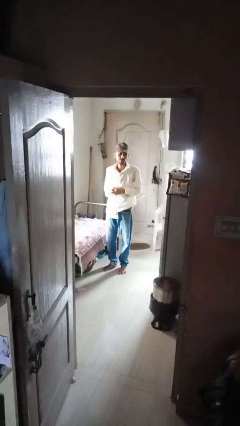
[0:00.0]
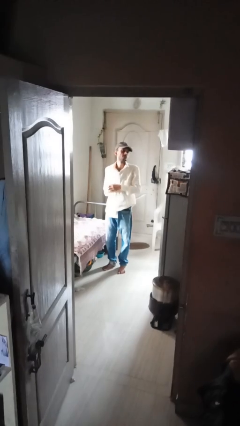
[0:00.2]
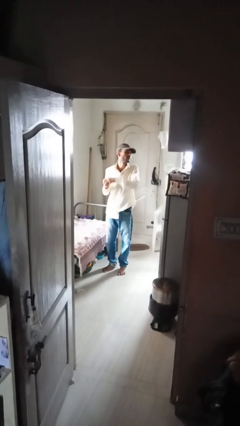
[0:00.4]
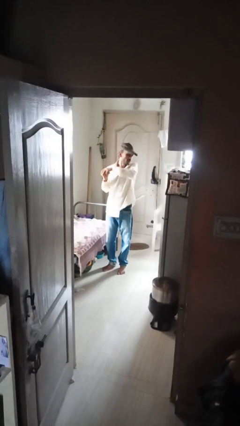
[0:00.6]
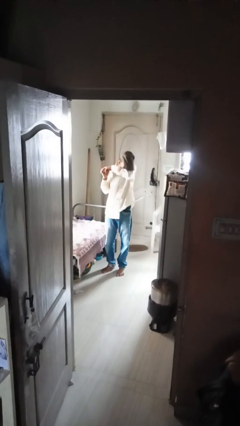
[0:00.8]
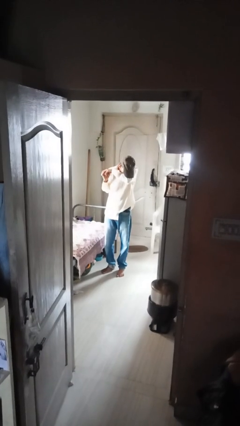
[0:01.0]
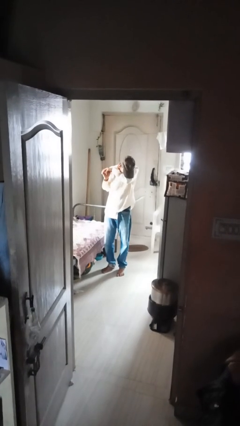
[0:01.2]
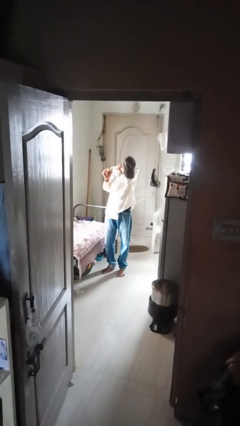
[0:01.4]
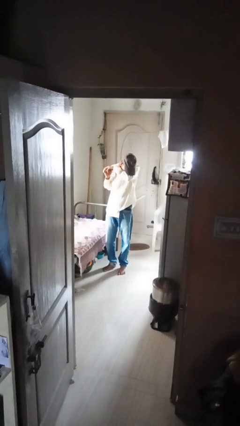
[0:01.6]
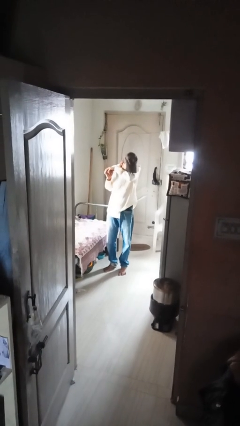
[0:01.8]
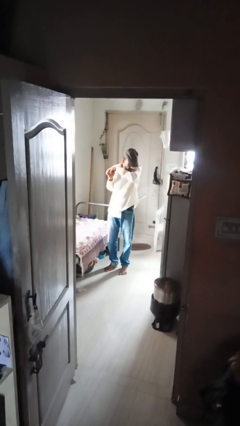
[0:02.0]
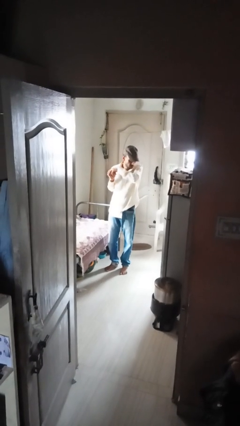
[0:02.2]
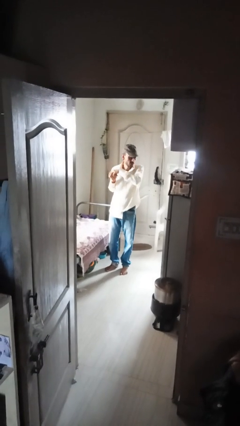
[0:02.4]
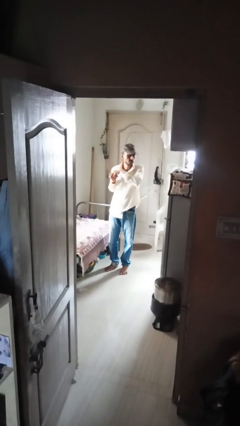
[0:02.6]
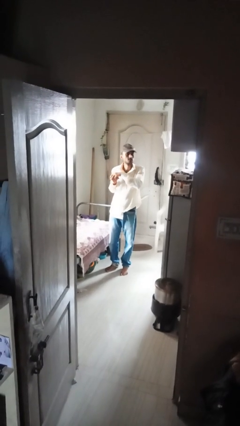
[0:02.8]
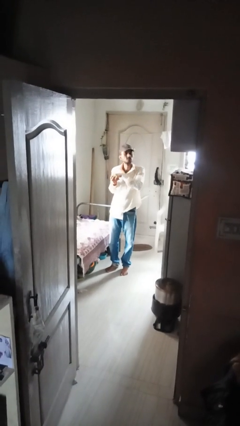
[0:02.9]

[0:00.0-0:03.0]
person sneezes into arm

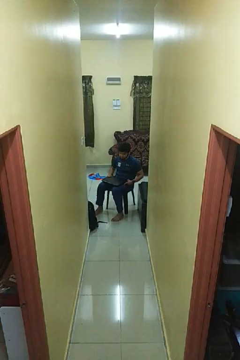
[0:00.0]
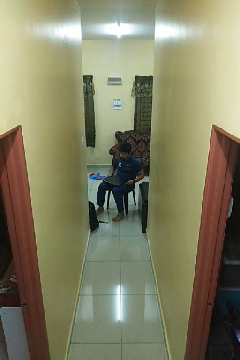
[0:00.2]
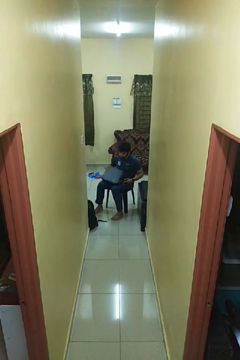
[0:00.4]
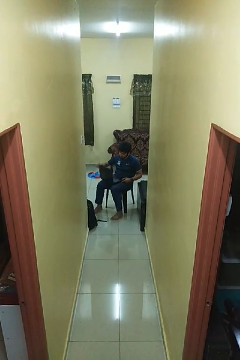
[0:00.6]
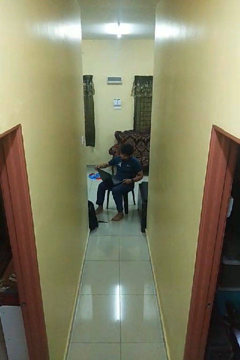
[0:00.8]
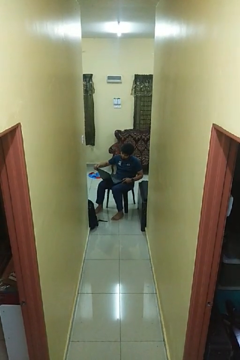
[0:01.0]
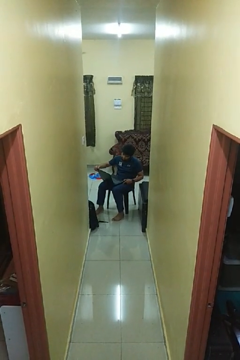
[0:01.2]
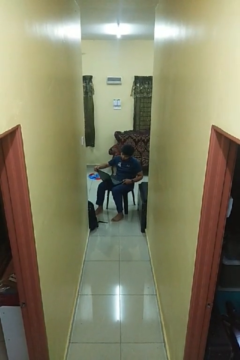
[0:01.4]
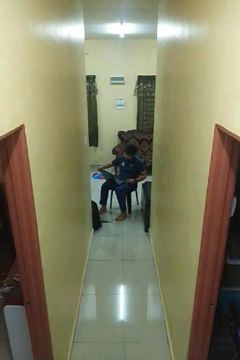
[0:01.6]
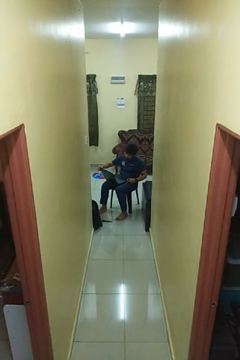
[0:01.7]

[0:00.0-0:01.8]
person opens laptop

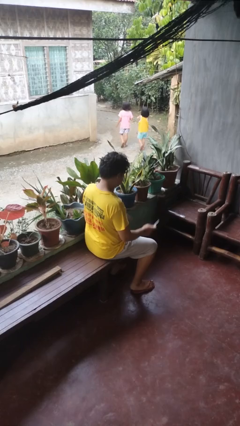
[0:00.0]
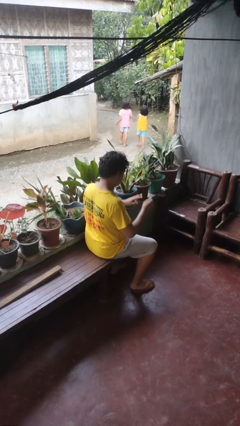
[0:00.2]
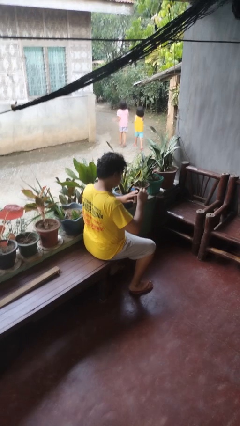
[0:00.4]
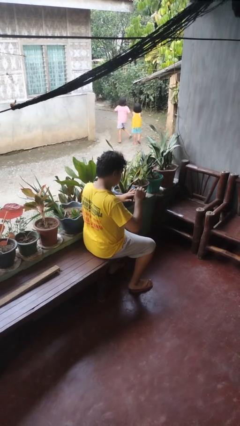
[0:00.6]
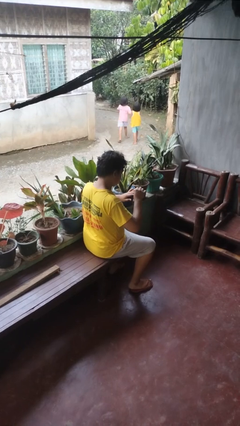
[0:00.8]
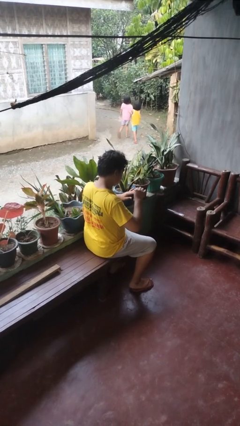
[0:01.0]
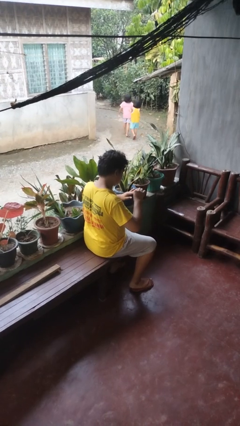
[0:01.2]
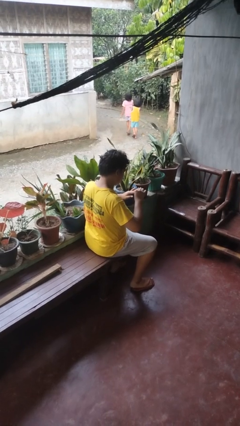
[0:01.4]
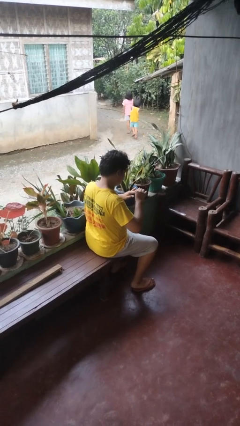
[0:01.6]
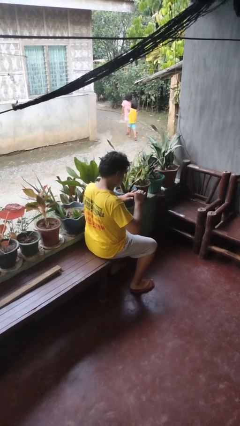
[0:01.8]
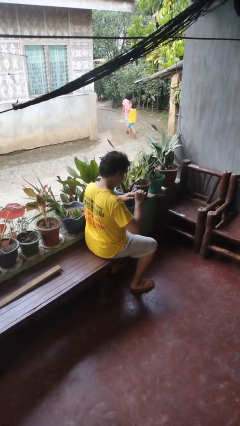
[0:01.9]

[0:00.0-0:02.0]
person files fingernails

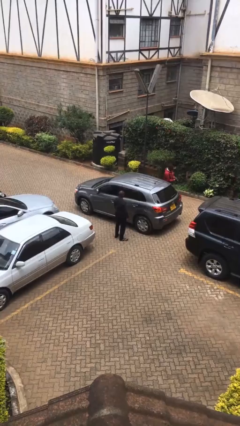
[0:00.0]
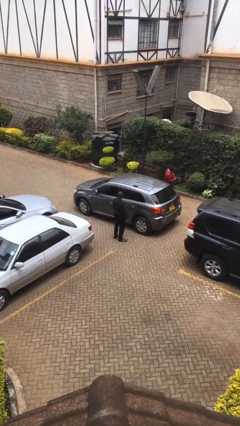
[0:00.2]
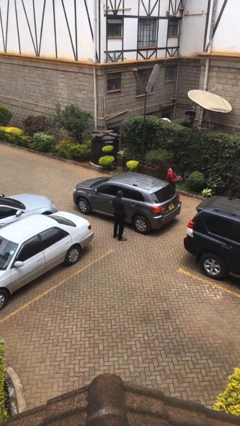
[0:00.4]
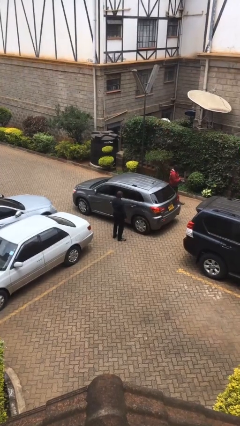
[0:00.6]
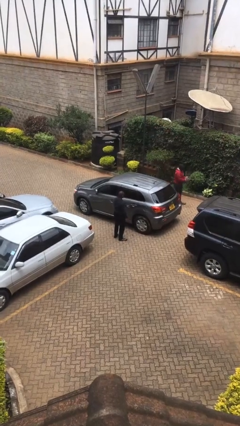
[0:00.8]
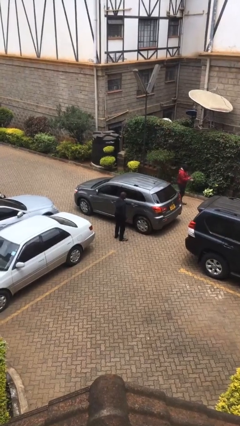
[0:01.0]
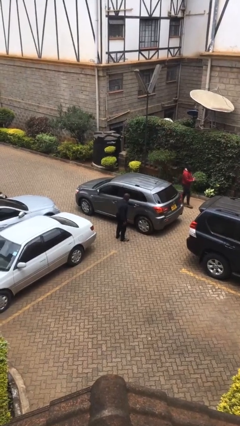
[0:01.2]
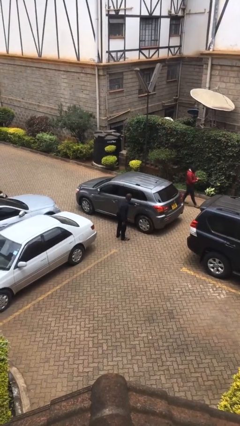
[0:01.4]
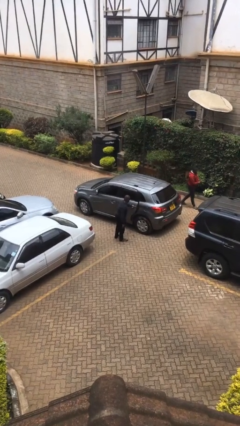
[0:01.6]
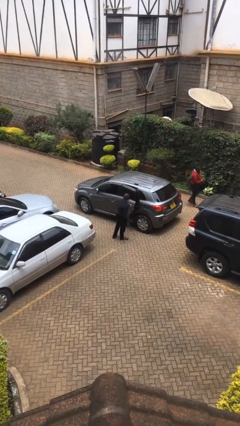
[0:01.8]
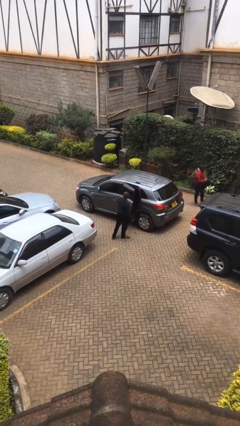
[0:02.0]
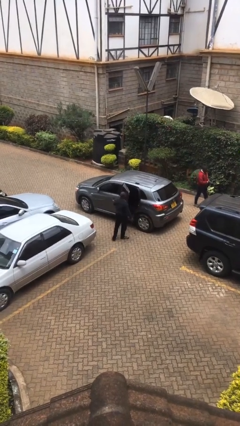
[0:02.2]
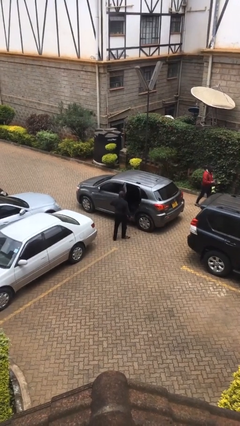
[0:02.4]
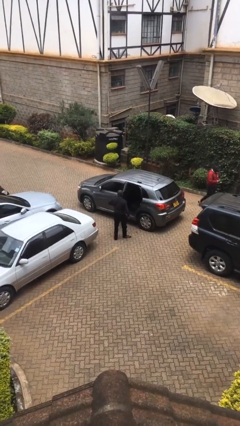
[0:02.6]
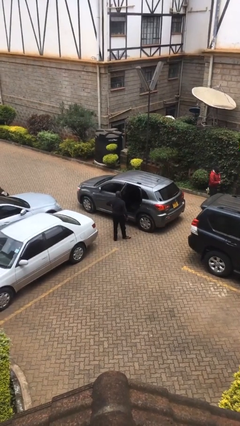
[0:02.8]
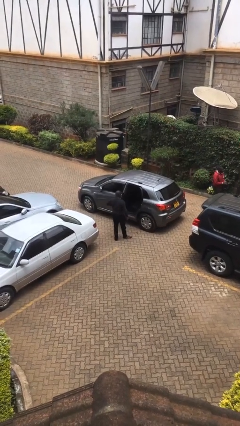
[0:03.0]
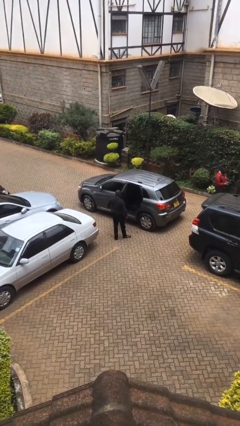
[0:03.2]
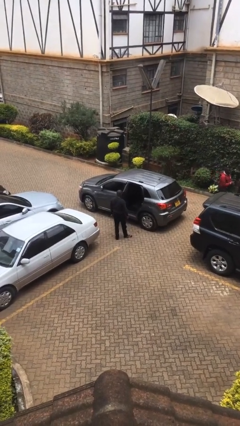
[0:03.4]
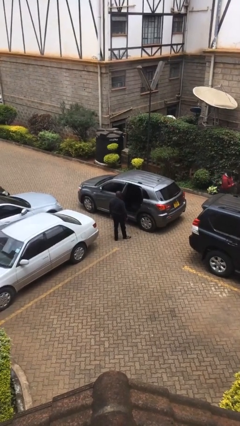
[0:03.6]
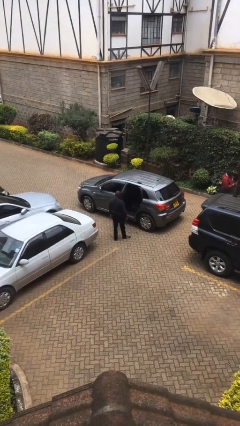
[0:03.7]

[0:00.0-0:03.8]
person opens car door

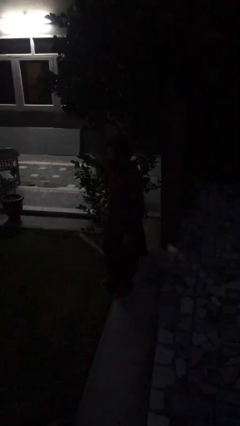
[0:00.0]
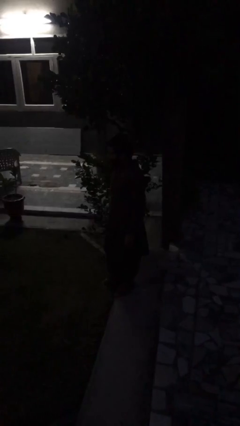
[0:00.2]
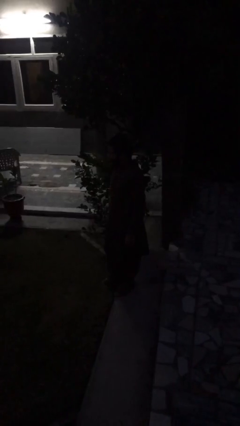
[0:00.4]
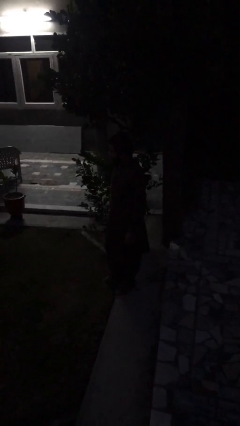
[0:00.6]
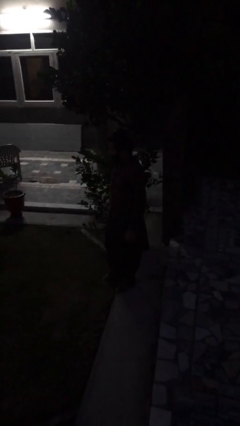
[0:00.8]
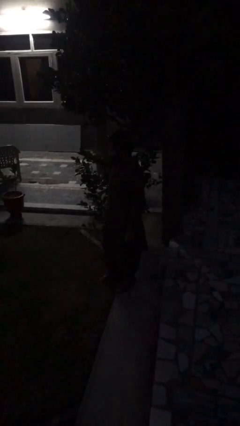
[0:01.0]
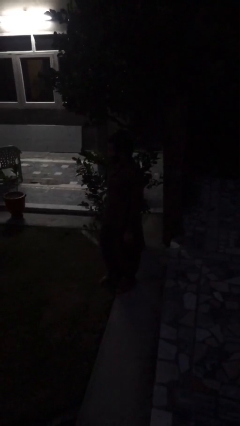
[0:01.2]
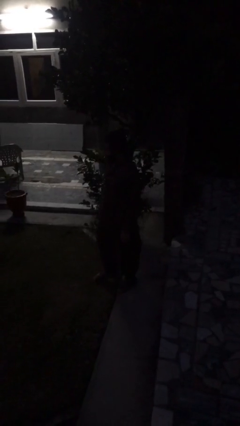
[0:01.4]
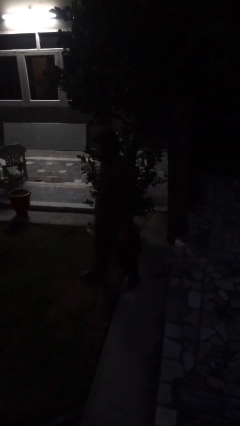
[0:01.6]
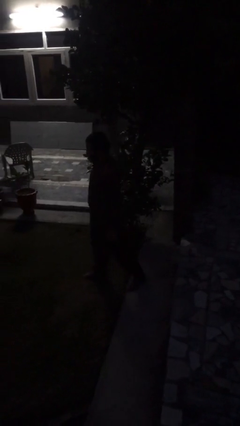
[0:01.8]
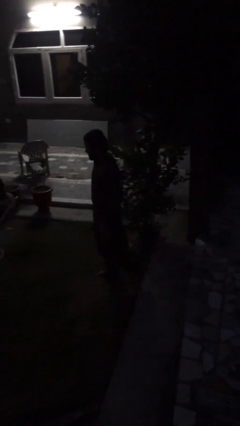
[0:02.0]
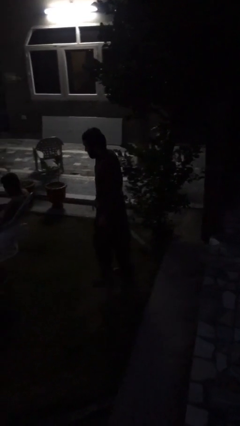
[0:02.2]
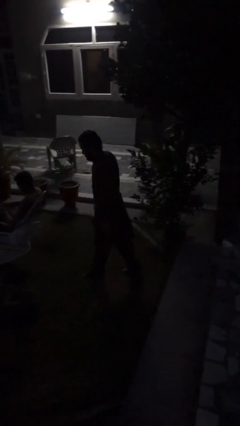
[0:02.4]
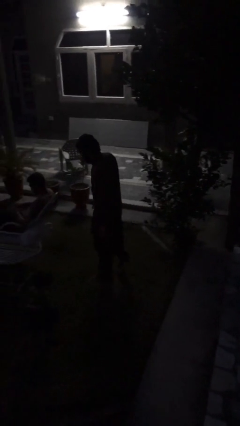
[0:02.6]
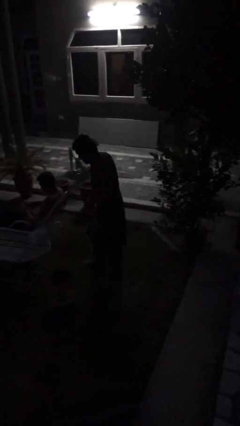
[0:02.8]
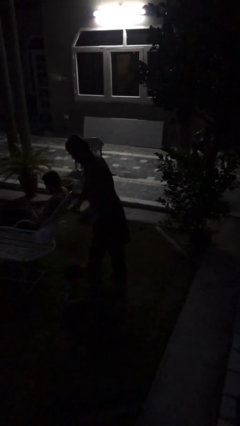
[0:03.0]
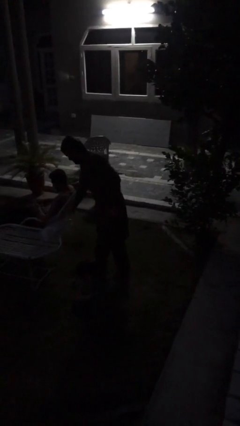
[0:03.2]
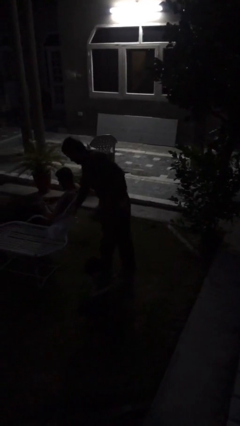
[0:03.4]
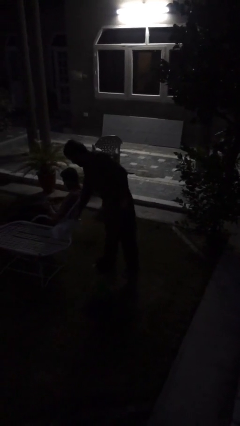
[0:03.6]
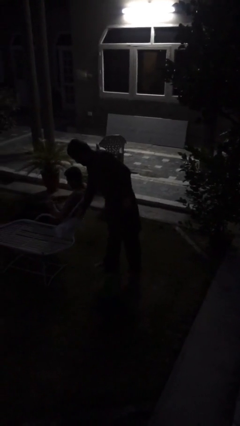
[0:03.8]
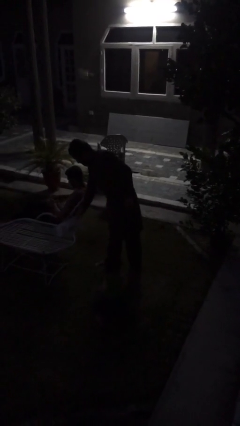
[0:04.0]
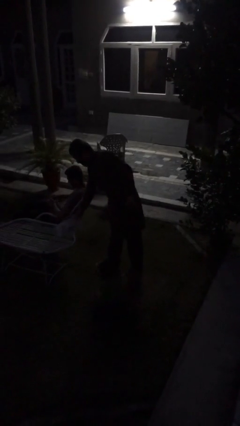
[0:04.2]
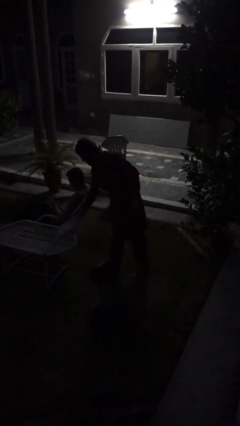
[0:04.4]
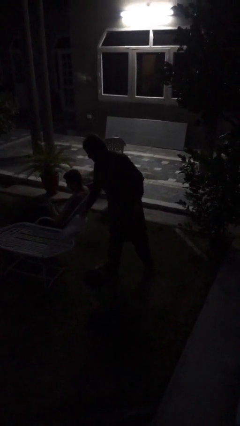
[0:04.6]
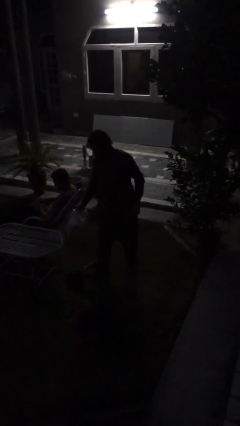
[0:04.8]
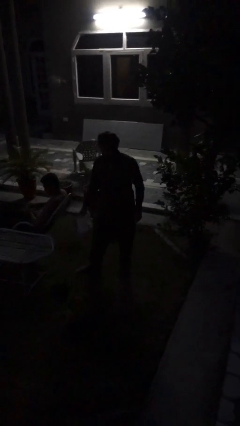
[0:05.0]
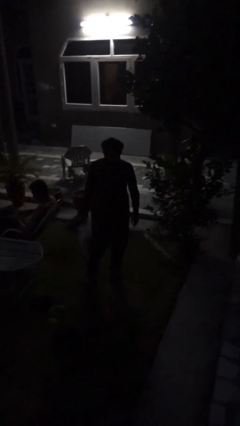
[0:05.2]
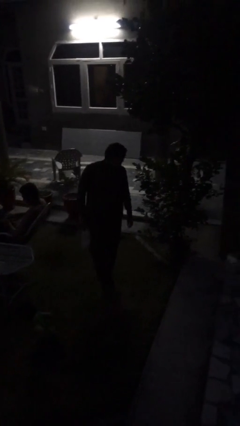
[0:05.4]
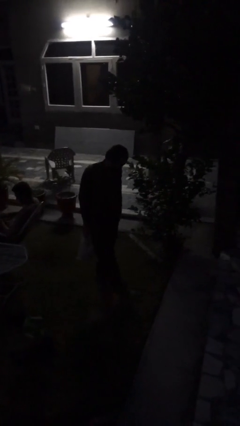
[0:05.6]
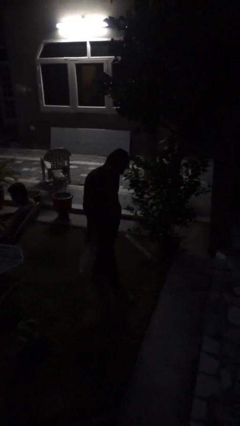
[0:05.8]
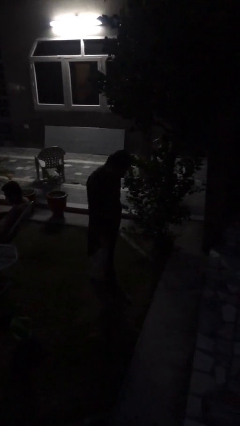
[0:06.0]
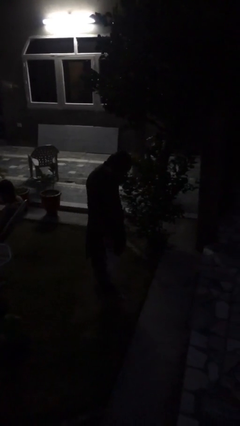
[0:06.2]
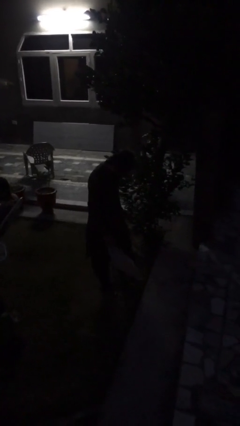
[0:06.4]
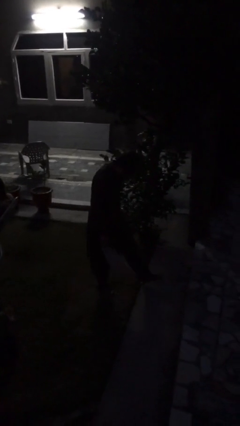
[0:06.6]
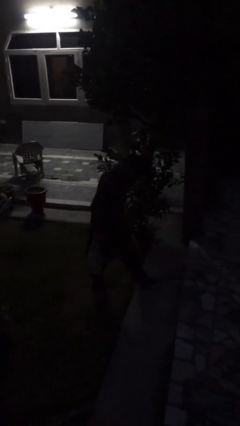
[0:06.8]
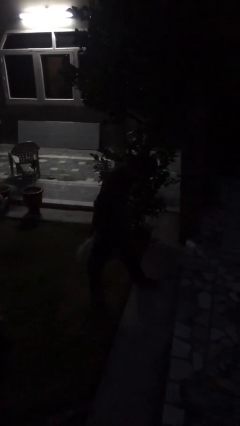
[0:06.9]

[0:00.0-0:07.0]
person steals object from person

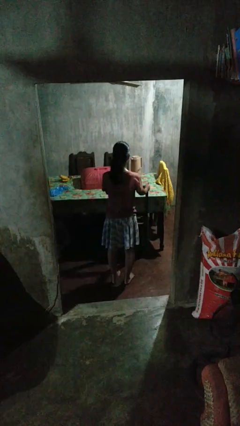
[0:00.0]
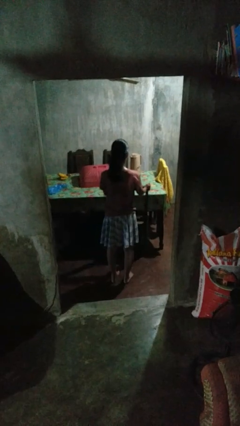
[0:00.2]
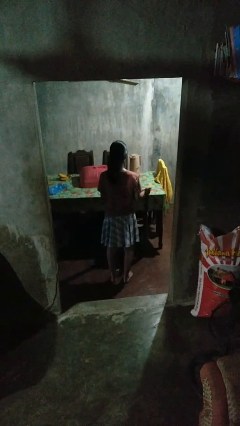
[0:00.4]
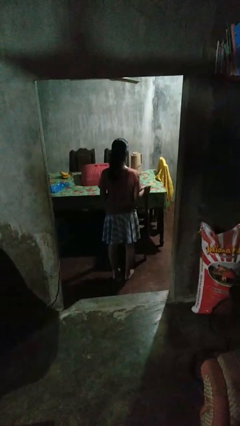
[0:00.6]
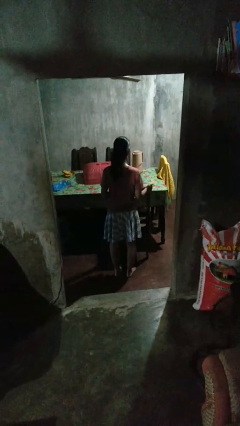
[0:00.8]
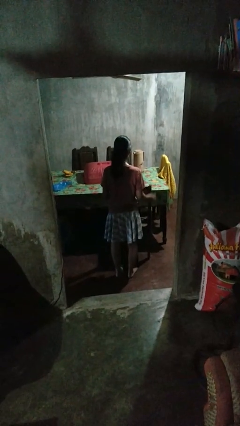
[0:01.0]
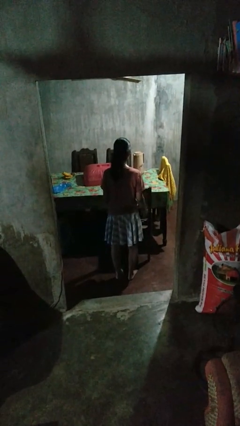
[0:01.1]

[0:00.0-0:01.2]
person pulls out chair
